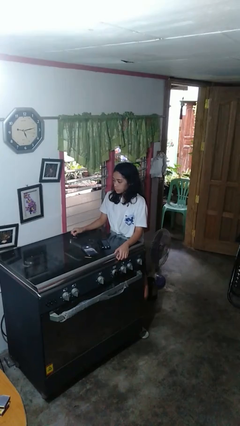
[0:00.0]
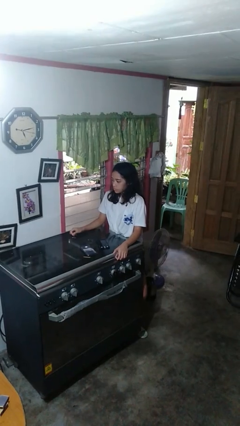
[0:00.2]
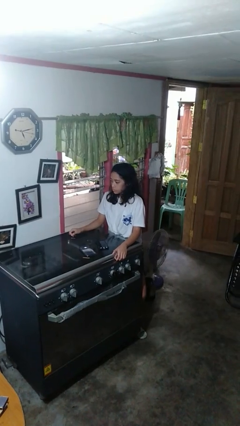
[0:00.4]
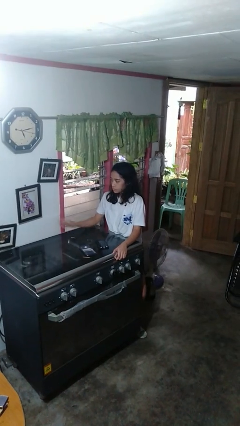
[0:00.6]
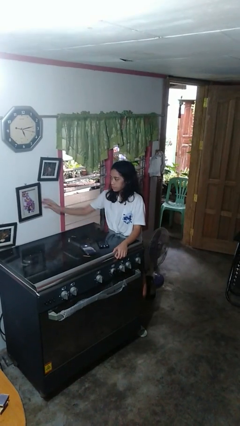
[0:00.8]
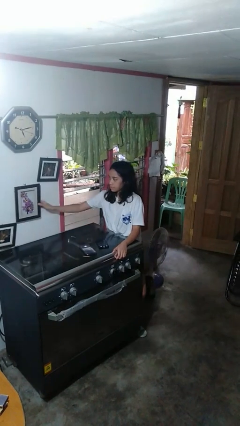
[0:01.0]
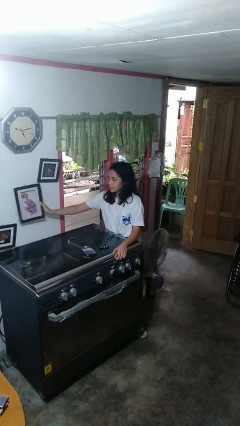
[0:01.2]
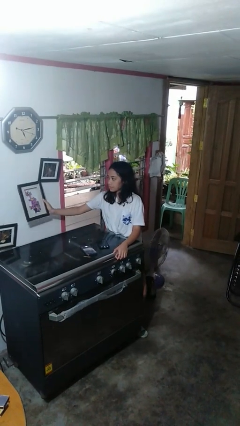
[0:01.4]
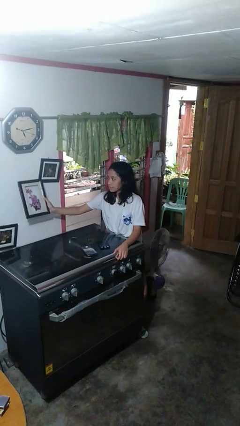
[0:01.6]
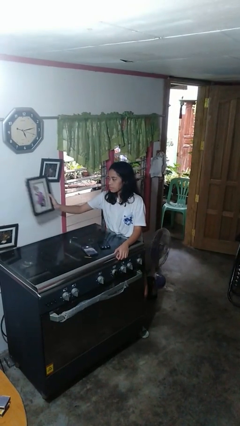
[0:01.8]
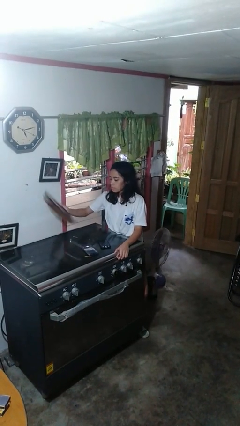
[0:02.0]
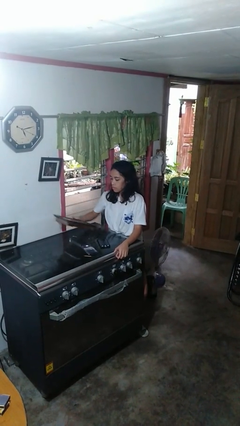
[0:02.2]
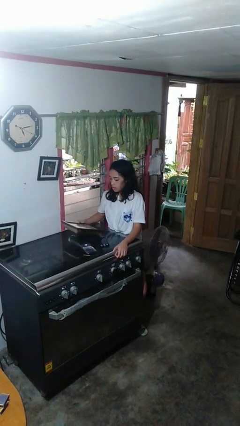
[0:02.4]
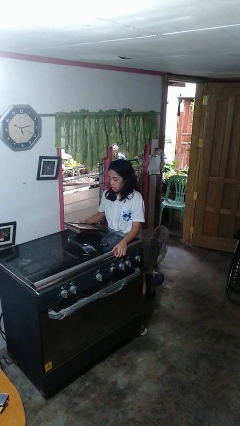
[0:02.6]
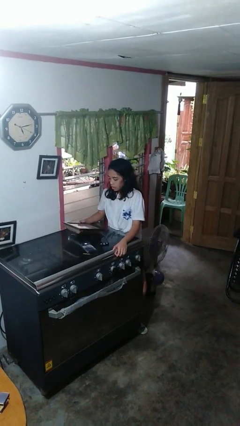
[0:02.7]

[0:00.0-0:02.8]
person takes down picture frame

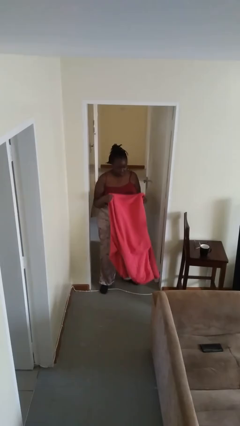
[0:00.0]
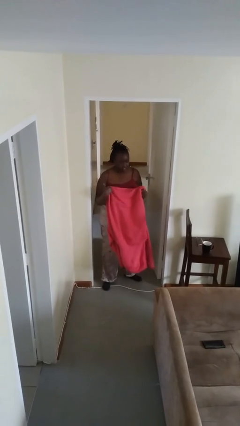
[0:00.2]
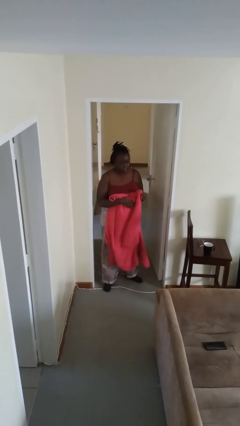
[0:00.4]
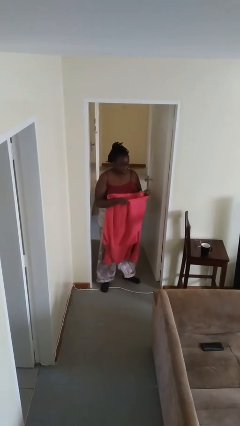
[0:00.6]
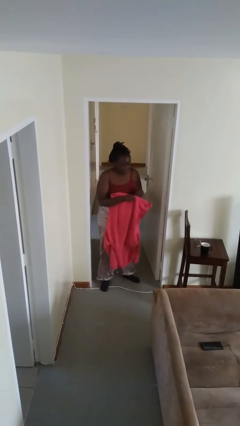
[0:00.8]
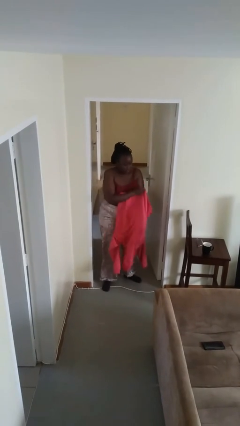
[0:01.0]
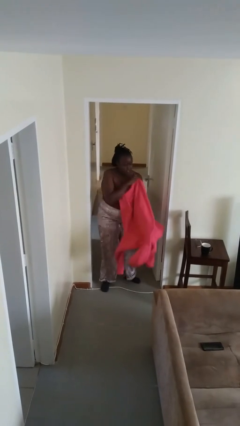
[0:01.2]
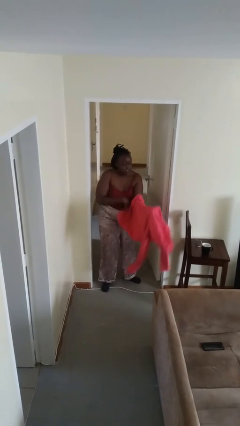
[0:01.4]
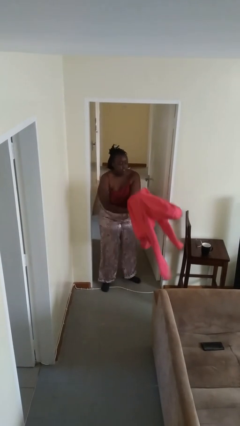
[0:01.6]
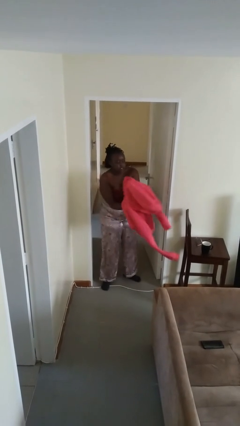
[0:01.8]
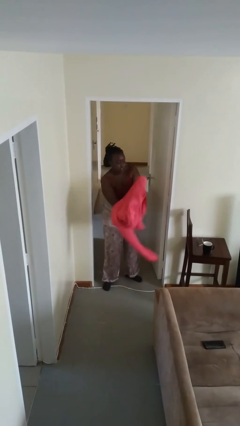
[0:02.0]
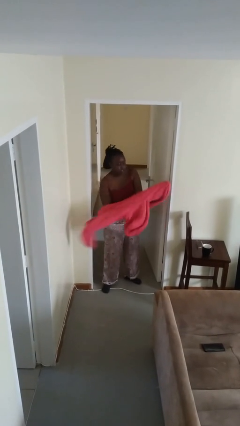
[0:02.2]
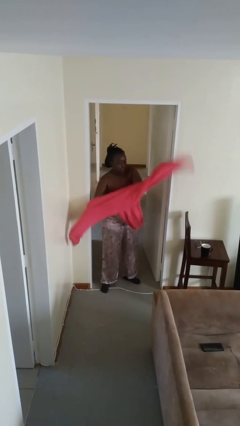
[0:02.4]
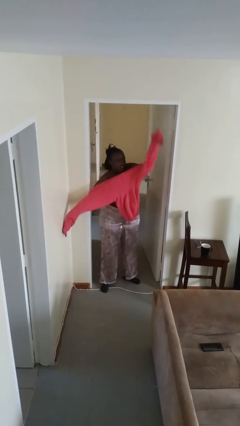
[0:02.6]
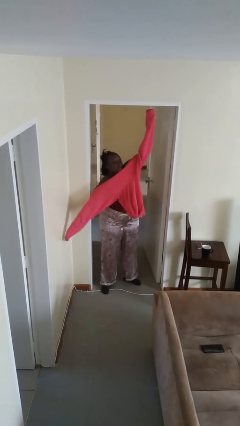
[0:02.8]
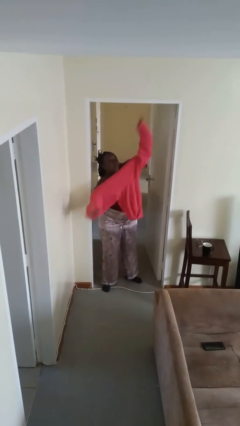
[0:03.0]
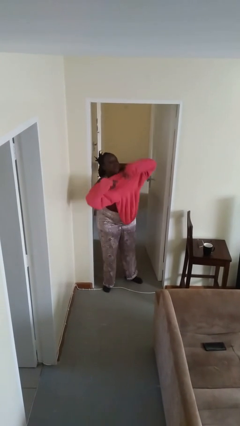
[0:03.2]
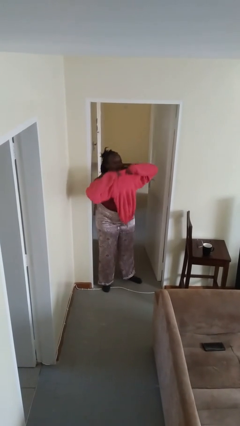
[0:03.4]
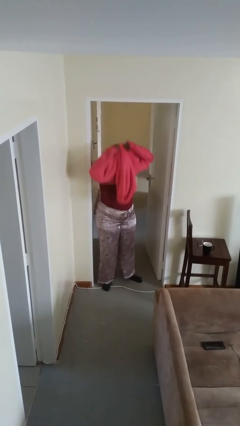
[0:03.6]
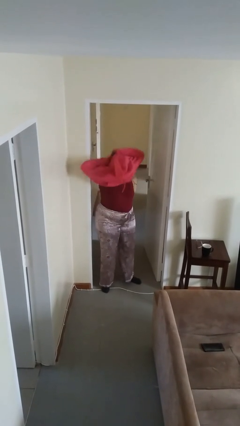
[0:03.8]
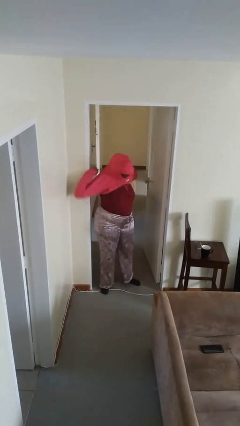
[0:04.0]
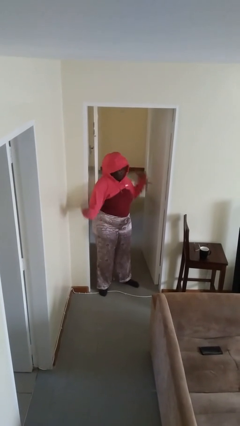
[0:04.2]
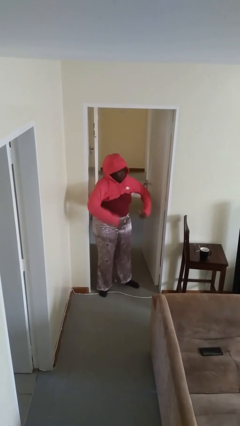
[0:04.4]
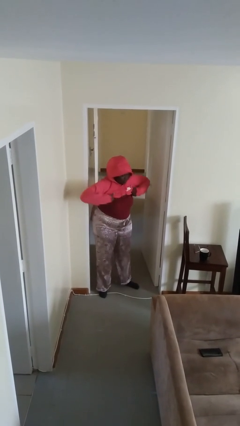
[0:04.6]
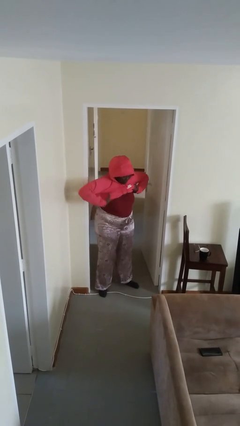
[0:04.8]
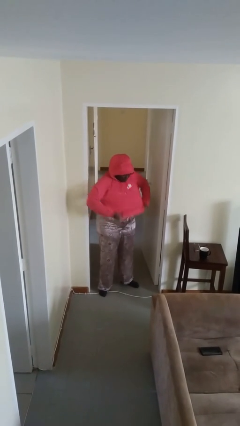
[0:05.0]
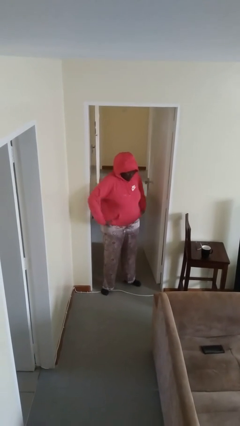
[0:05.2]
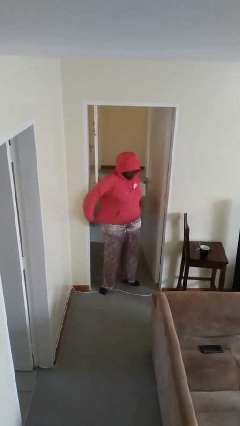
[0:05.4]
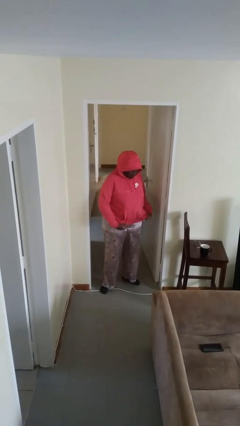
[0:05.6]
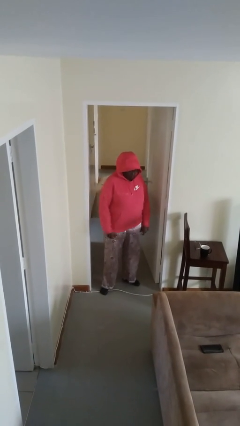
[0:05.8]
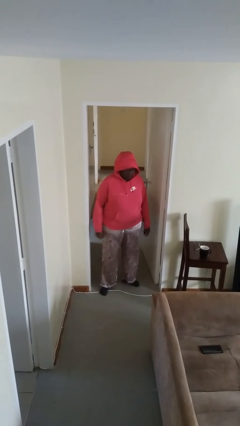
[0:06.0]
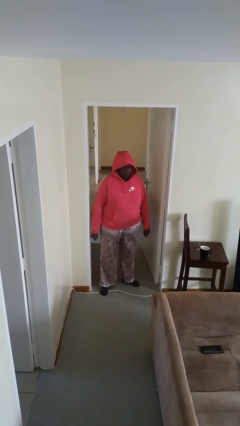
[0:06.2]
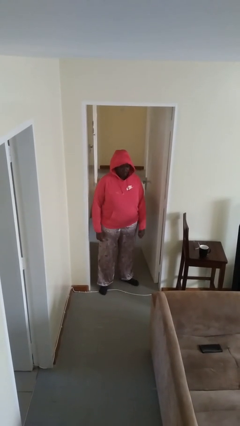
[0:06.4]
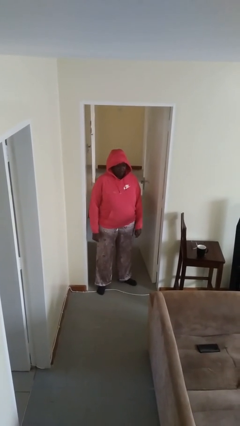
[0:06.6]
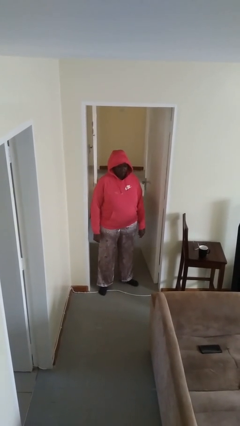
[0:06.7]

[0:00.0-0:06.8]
person puts on hoodie

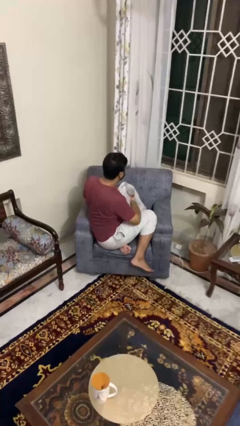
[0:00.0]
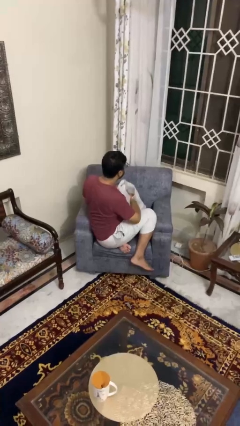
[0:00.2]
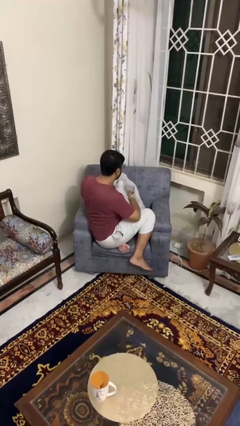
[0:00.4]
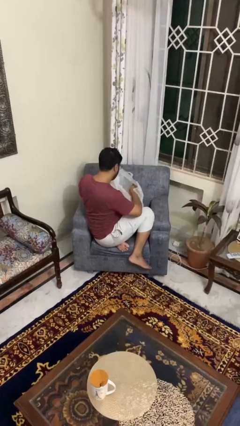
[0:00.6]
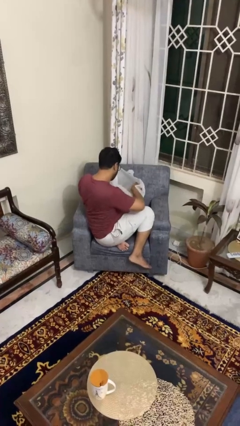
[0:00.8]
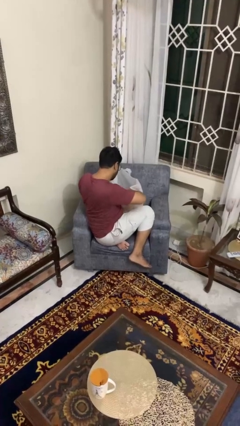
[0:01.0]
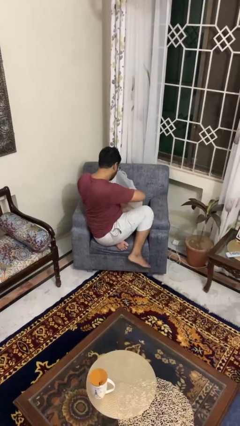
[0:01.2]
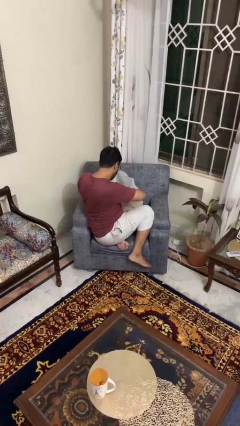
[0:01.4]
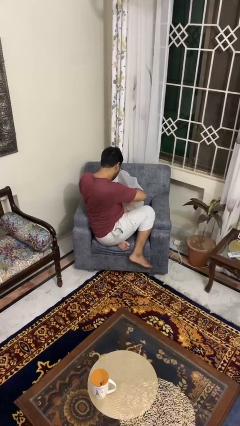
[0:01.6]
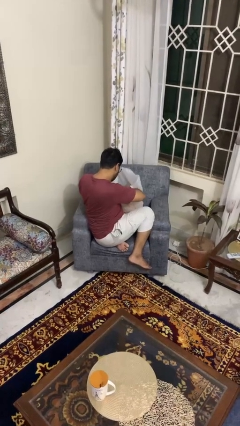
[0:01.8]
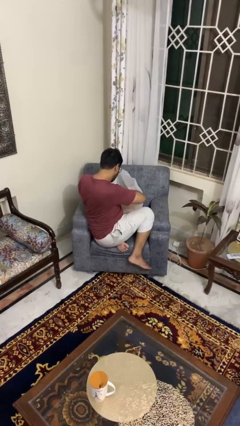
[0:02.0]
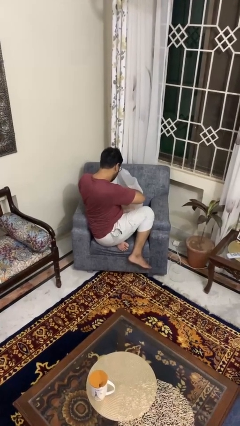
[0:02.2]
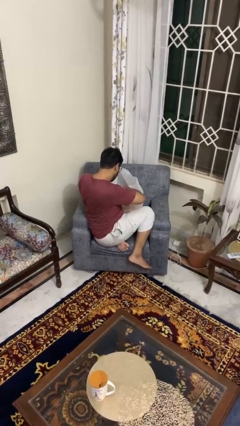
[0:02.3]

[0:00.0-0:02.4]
person searches in bag

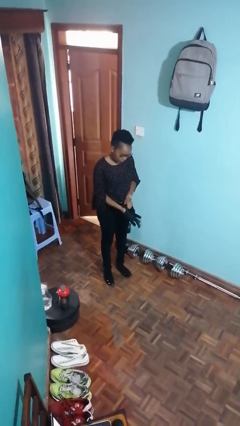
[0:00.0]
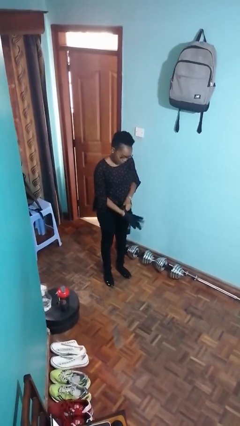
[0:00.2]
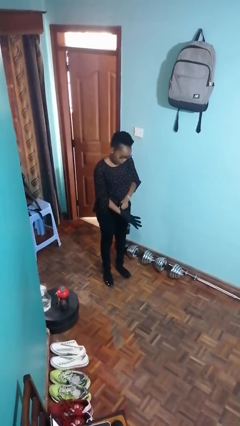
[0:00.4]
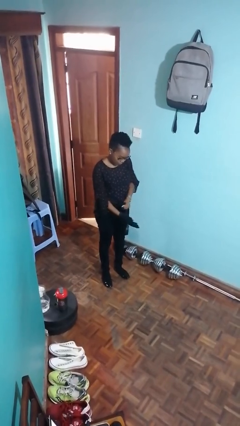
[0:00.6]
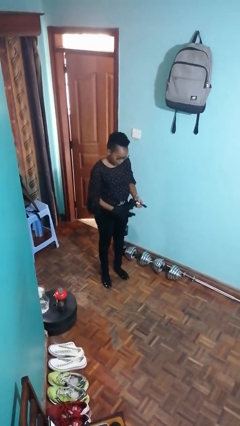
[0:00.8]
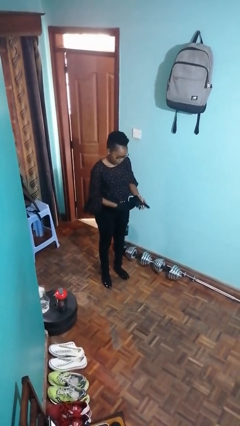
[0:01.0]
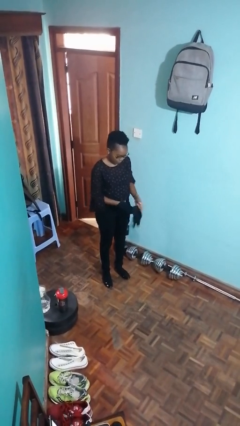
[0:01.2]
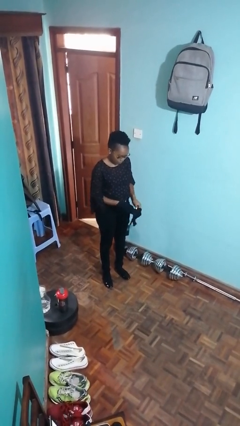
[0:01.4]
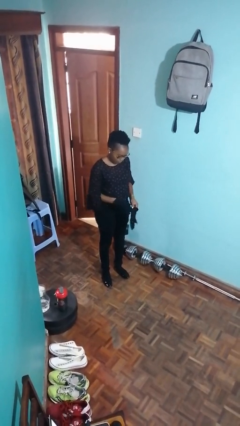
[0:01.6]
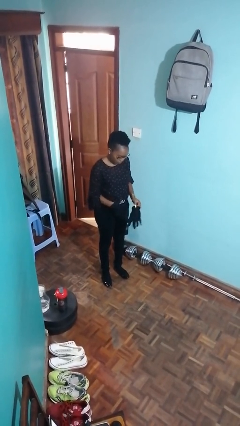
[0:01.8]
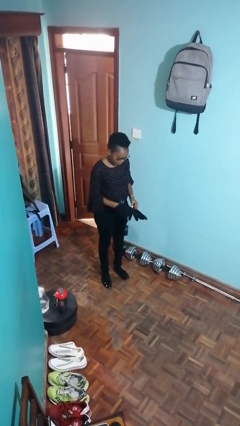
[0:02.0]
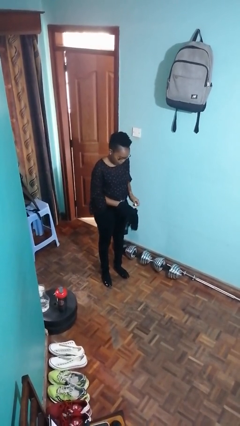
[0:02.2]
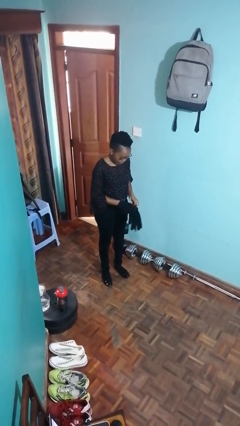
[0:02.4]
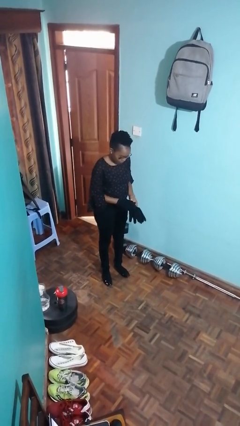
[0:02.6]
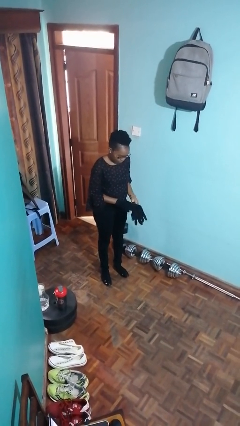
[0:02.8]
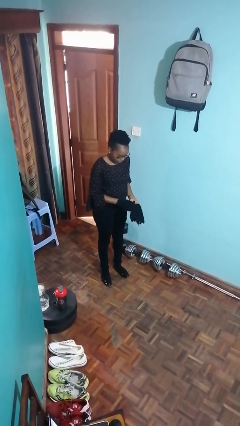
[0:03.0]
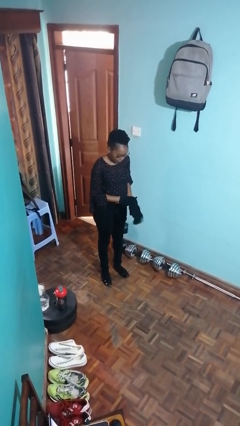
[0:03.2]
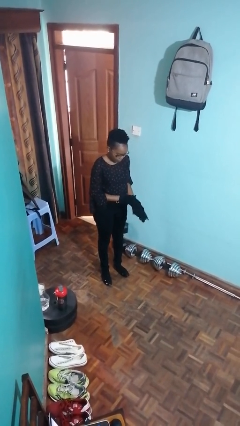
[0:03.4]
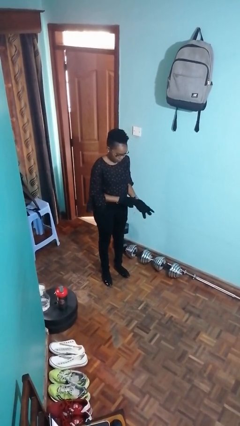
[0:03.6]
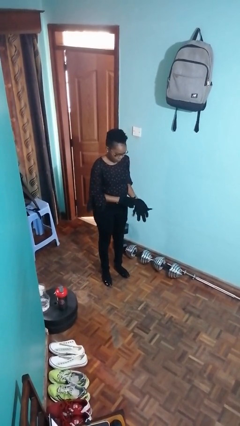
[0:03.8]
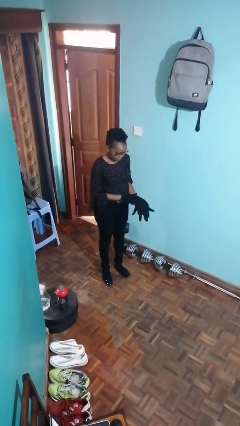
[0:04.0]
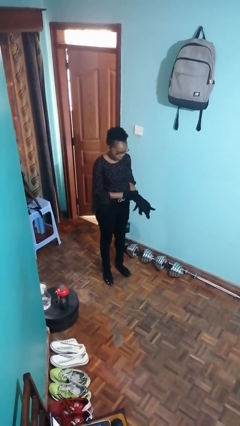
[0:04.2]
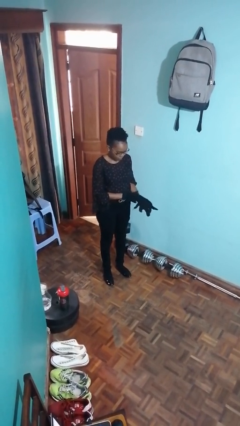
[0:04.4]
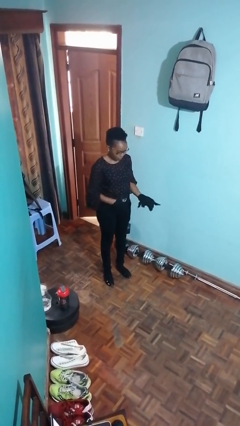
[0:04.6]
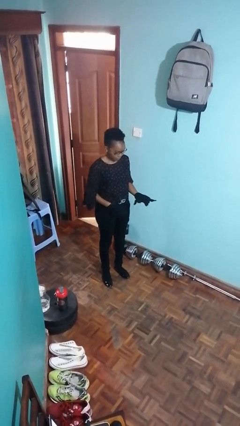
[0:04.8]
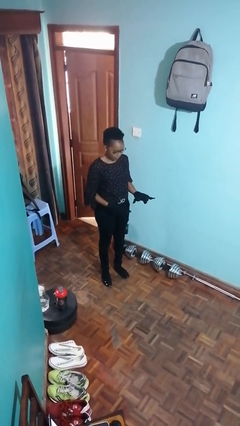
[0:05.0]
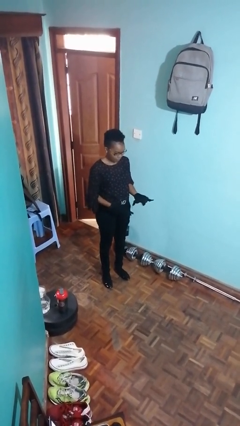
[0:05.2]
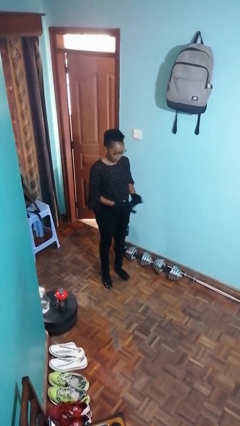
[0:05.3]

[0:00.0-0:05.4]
person puts on gloves

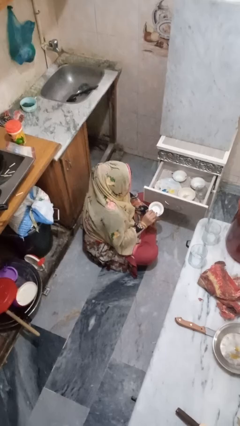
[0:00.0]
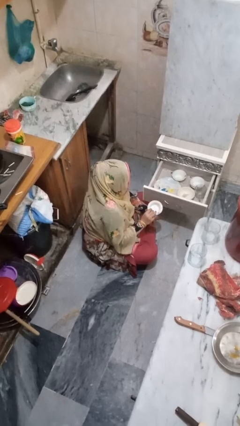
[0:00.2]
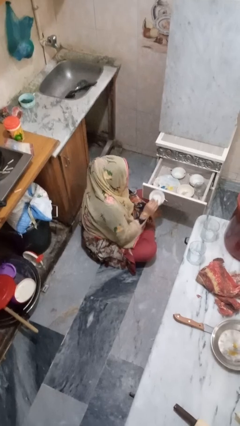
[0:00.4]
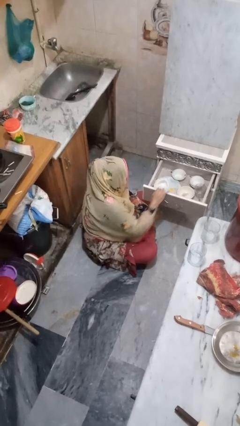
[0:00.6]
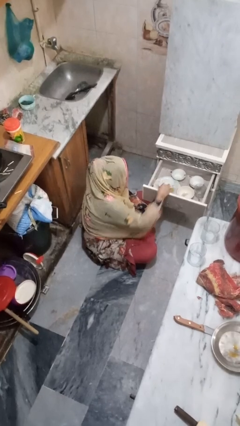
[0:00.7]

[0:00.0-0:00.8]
person puts object into kitchen drawer
